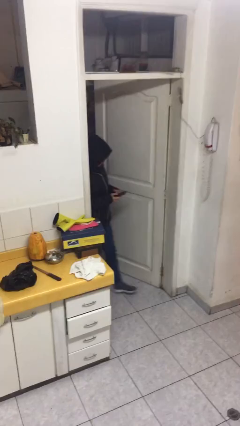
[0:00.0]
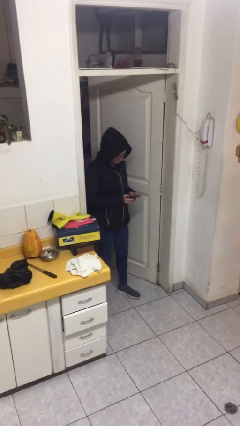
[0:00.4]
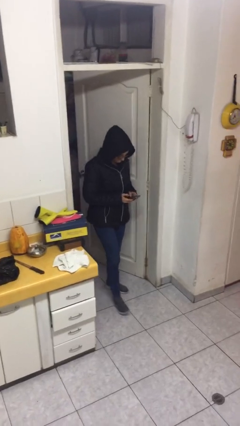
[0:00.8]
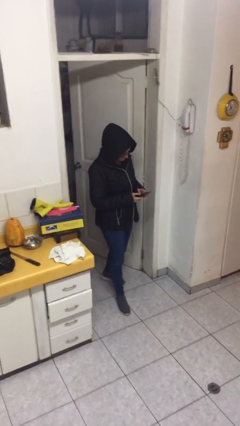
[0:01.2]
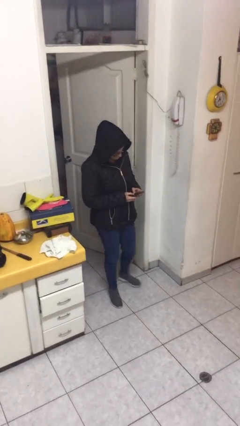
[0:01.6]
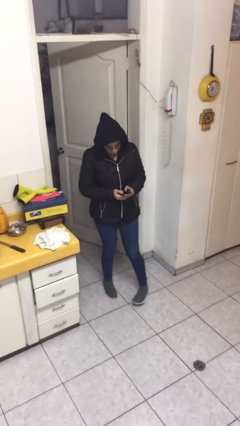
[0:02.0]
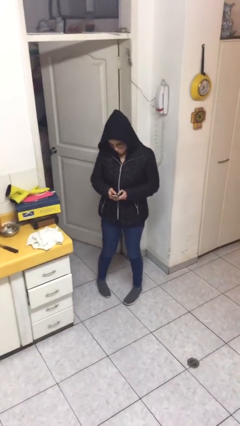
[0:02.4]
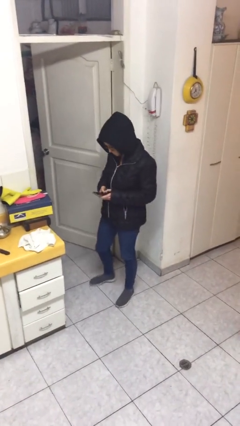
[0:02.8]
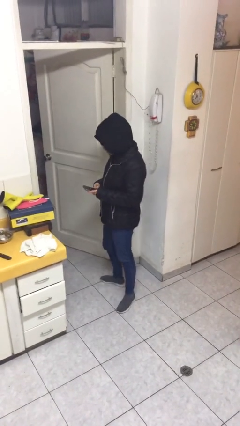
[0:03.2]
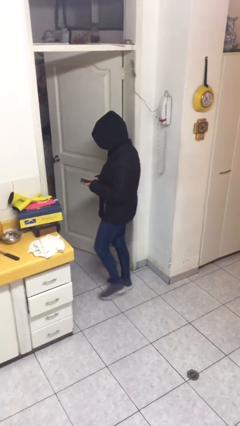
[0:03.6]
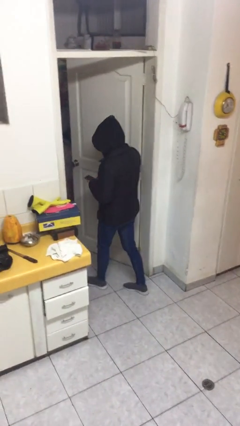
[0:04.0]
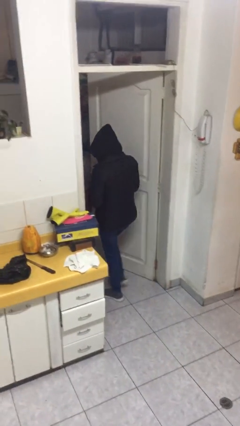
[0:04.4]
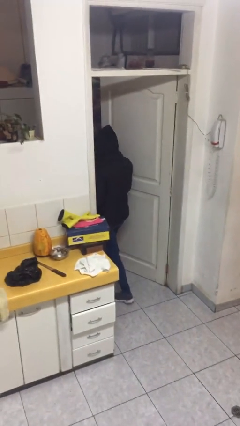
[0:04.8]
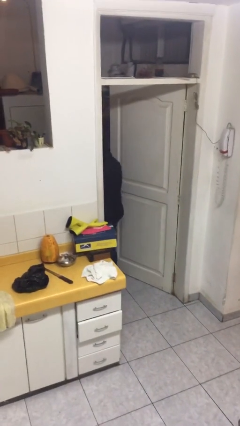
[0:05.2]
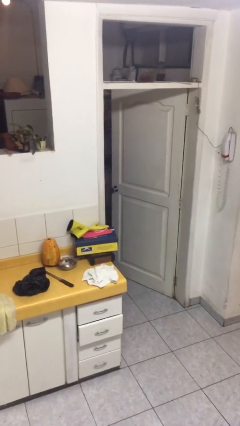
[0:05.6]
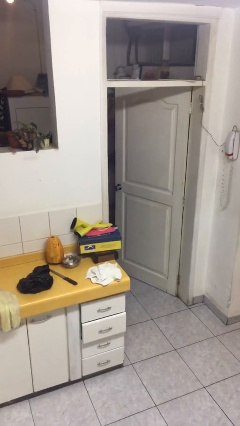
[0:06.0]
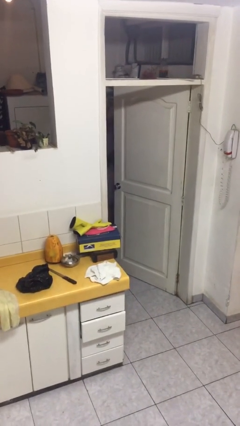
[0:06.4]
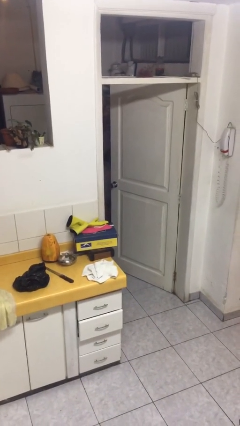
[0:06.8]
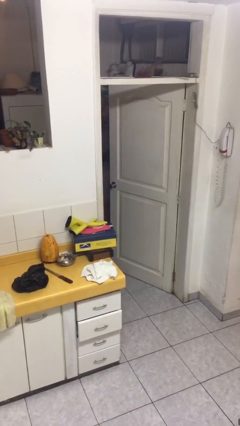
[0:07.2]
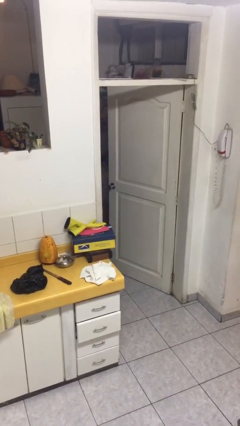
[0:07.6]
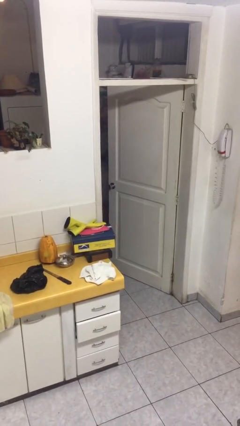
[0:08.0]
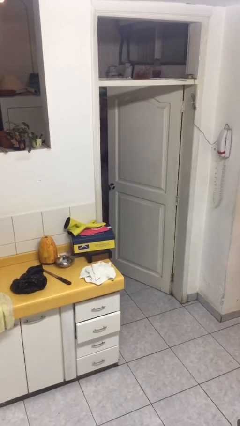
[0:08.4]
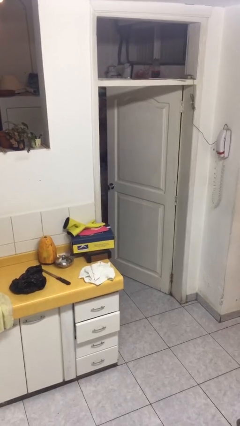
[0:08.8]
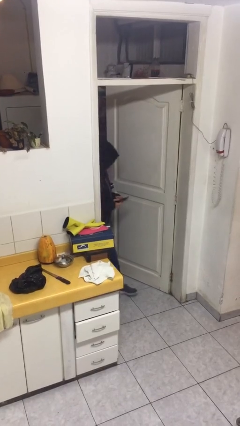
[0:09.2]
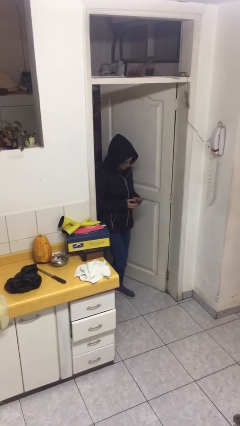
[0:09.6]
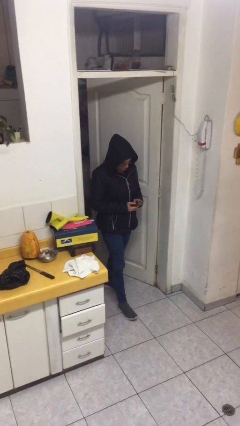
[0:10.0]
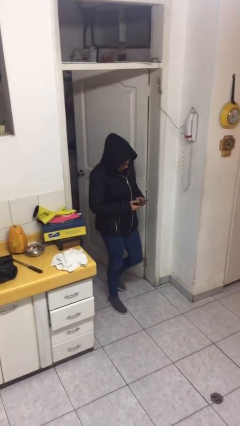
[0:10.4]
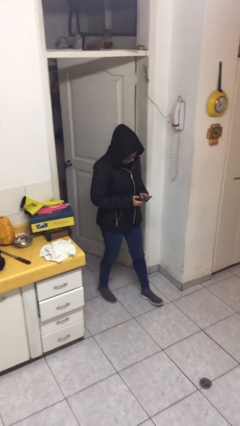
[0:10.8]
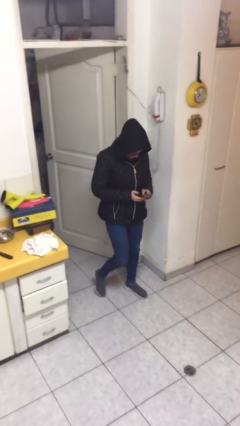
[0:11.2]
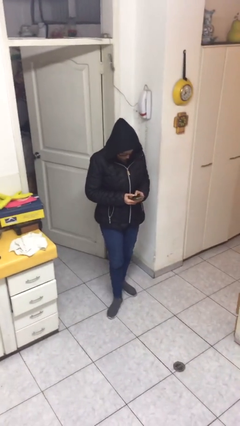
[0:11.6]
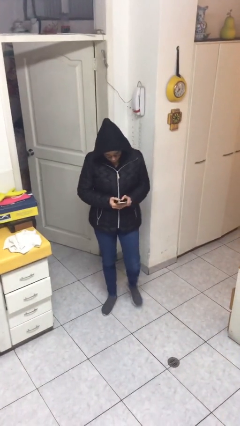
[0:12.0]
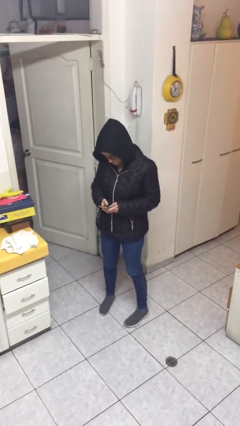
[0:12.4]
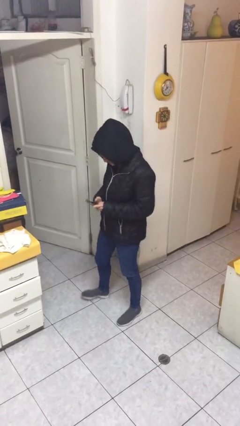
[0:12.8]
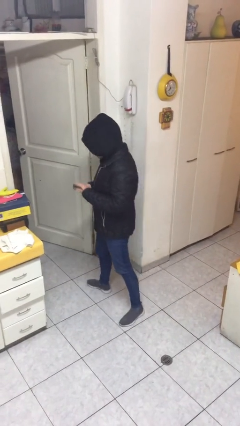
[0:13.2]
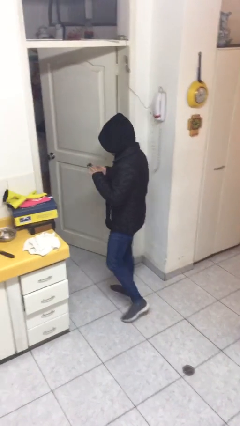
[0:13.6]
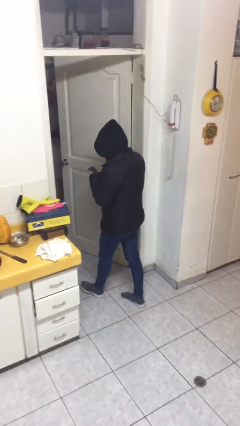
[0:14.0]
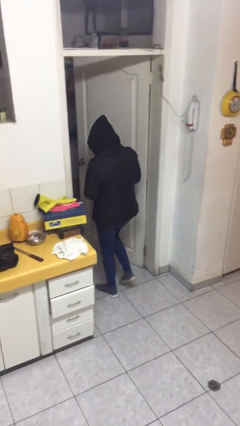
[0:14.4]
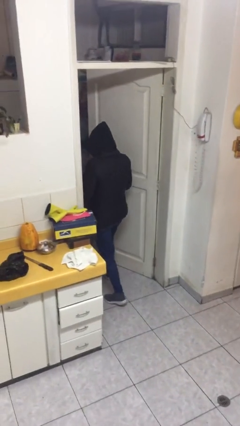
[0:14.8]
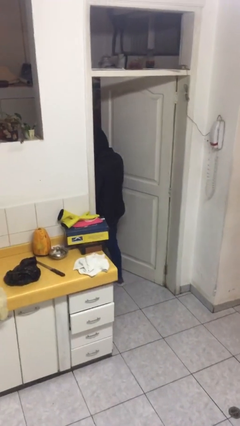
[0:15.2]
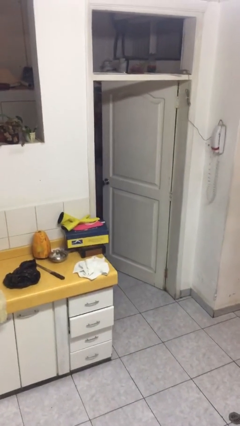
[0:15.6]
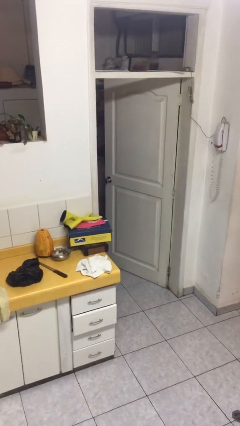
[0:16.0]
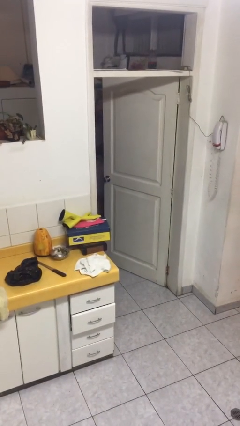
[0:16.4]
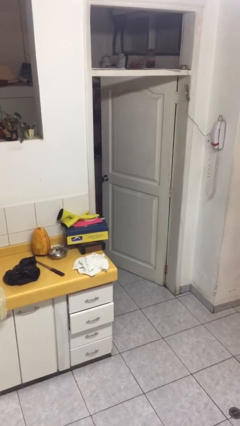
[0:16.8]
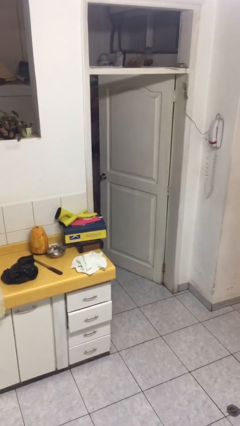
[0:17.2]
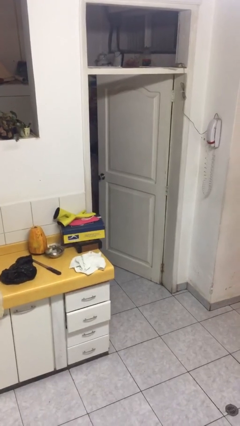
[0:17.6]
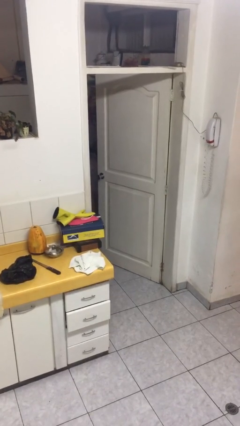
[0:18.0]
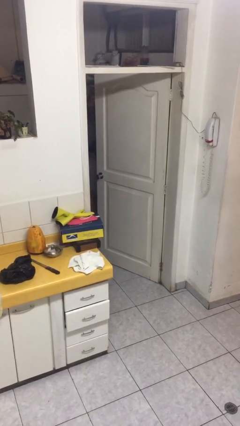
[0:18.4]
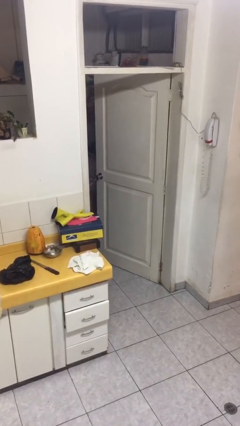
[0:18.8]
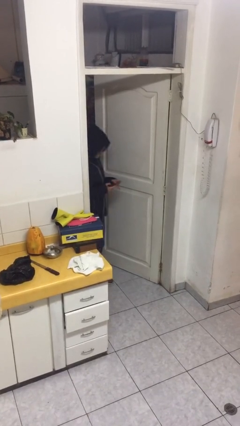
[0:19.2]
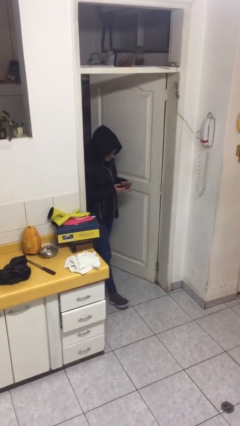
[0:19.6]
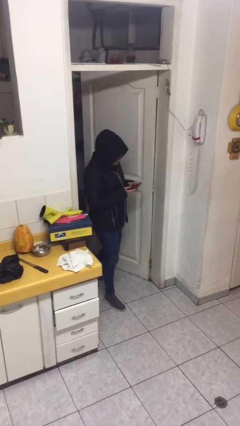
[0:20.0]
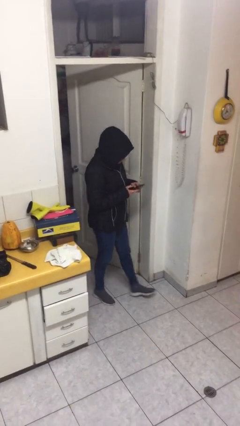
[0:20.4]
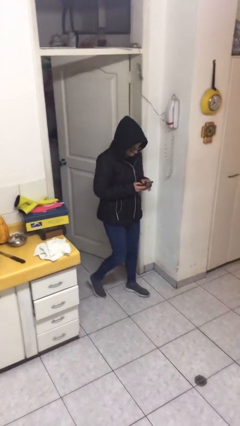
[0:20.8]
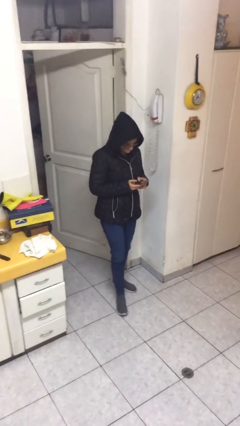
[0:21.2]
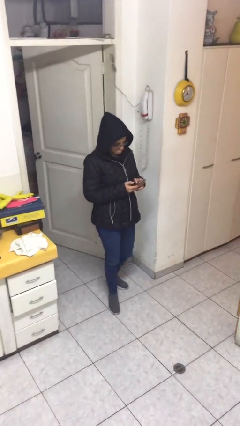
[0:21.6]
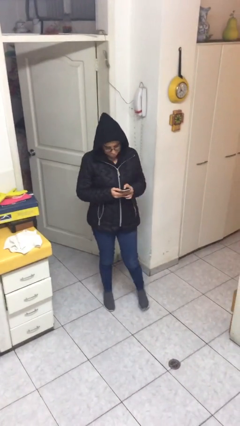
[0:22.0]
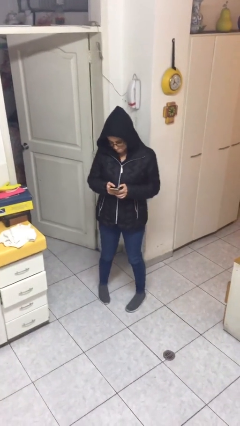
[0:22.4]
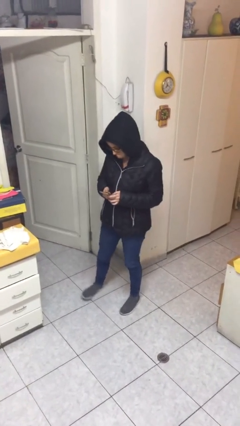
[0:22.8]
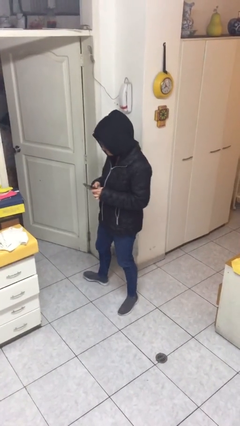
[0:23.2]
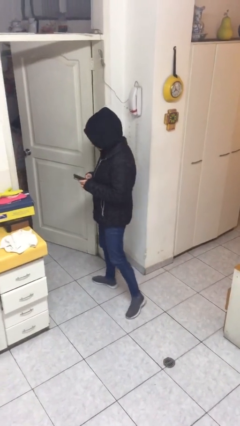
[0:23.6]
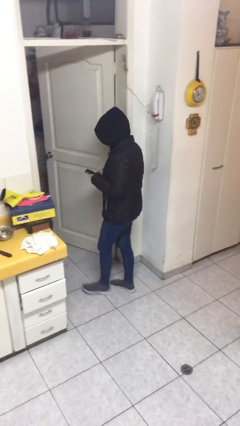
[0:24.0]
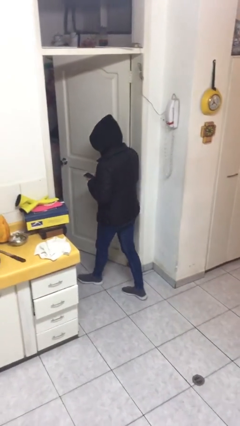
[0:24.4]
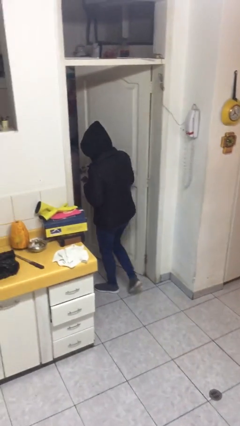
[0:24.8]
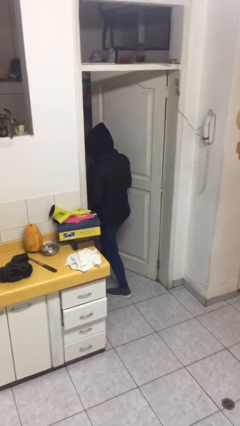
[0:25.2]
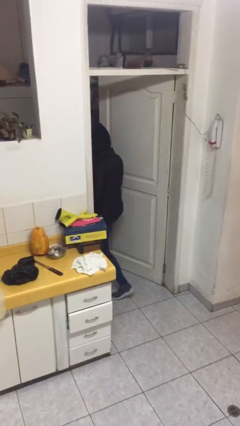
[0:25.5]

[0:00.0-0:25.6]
person texts on phone

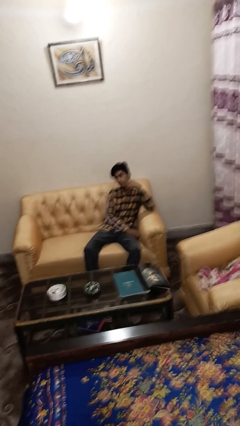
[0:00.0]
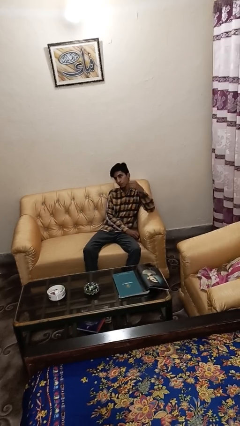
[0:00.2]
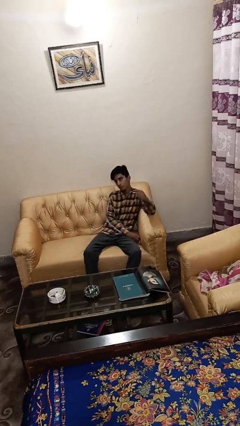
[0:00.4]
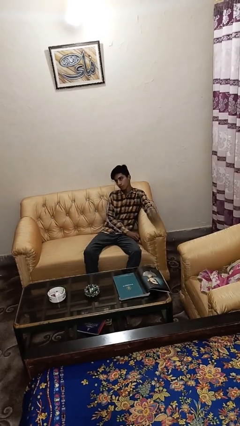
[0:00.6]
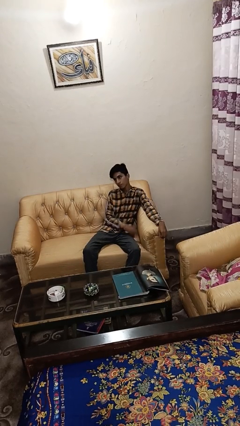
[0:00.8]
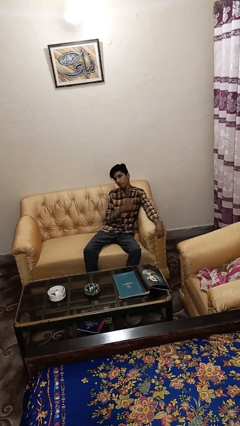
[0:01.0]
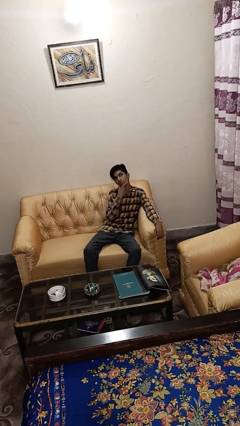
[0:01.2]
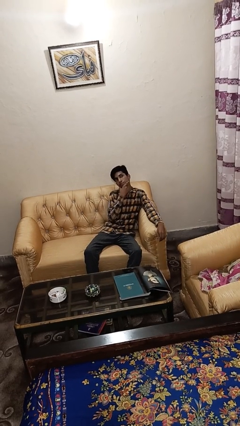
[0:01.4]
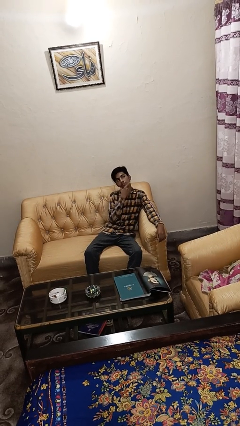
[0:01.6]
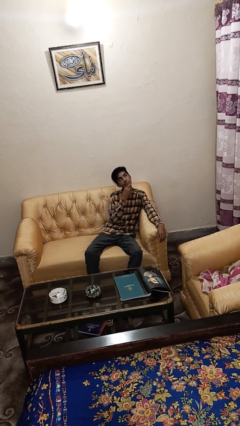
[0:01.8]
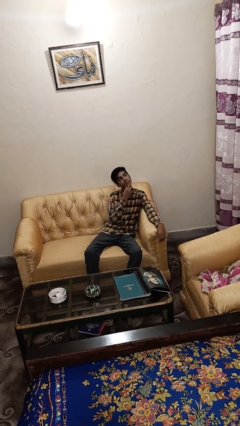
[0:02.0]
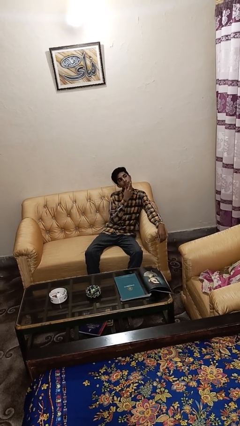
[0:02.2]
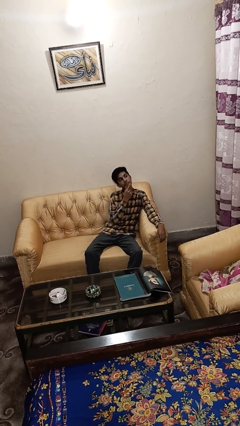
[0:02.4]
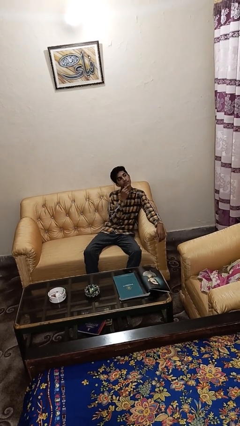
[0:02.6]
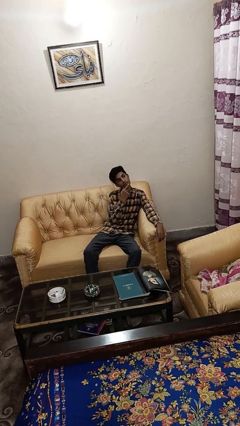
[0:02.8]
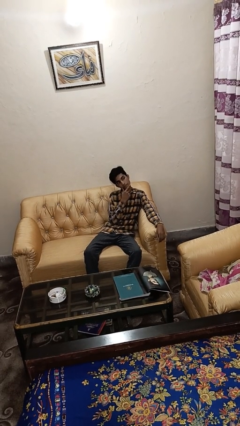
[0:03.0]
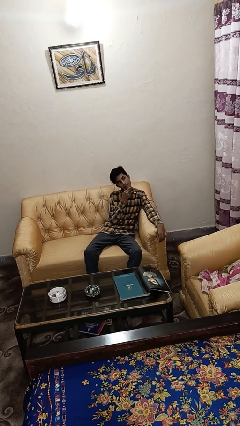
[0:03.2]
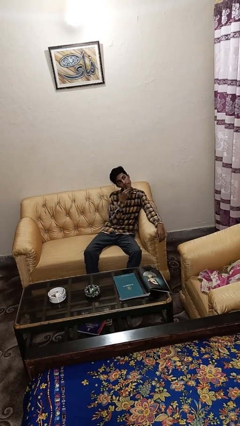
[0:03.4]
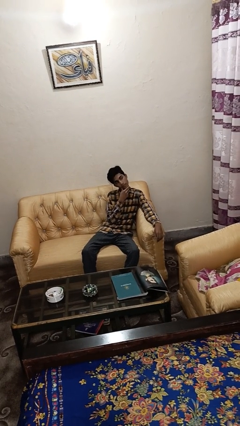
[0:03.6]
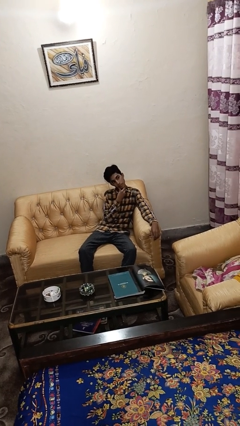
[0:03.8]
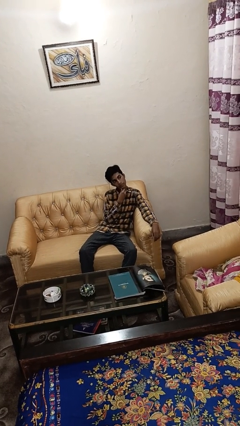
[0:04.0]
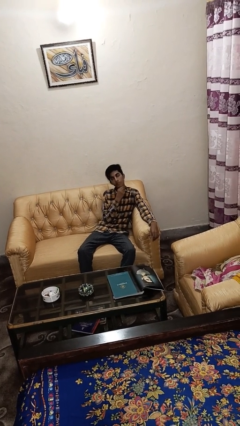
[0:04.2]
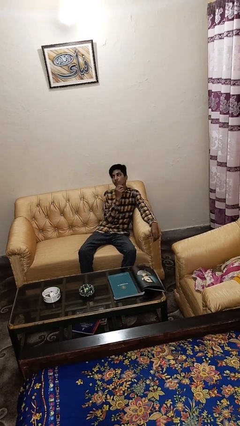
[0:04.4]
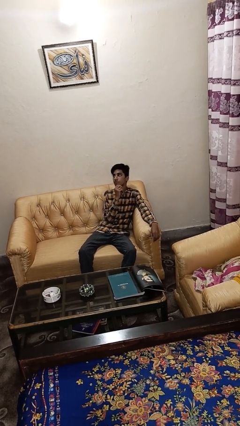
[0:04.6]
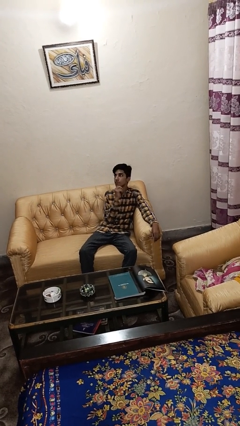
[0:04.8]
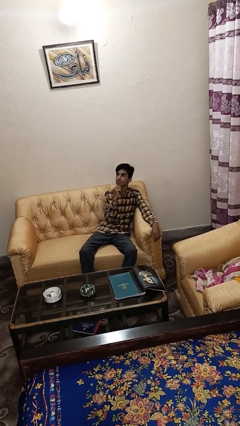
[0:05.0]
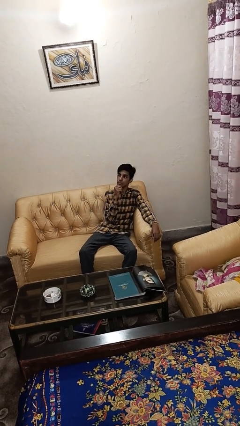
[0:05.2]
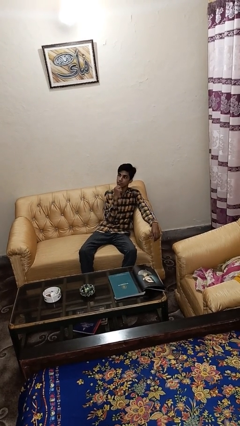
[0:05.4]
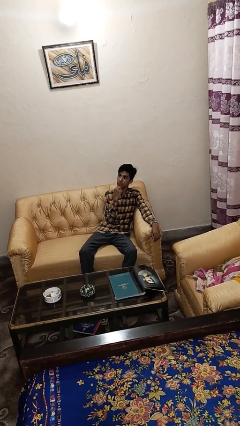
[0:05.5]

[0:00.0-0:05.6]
person strokes chin
